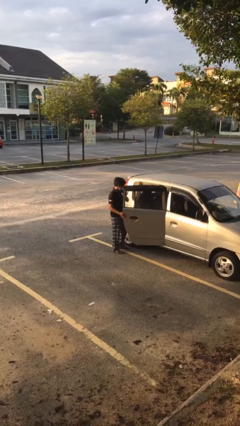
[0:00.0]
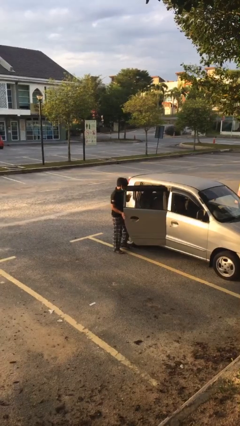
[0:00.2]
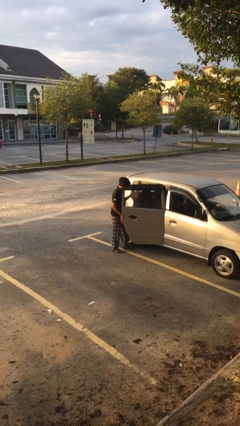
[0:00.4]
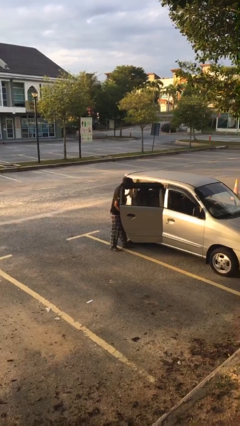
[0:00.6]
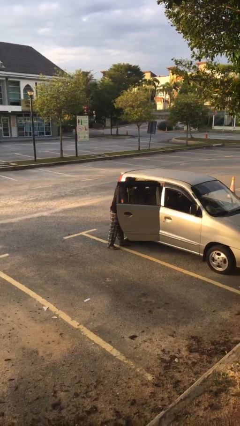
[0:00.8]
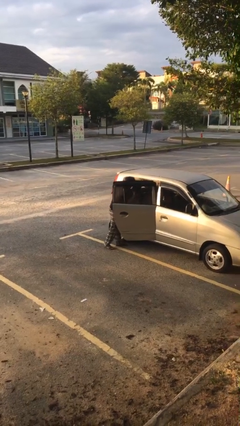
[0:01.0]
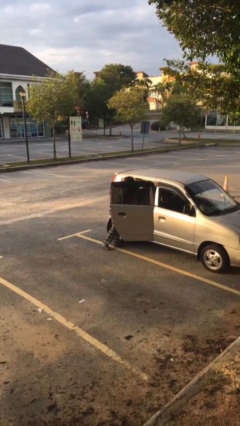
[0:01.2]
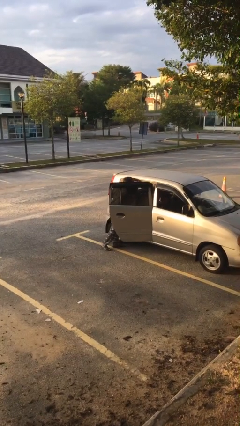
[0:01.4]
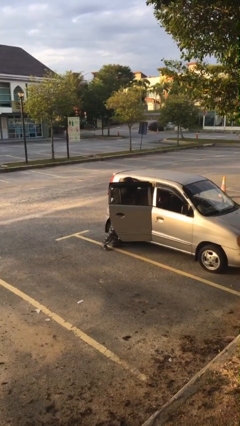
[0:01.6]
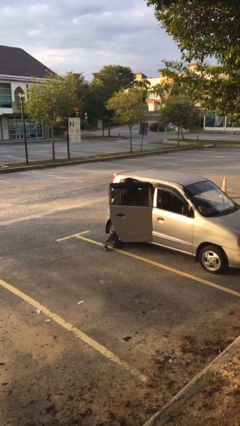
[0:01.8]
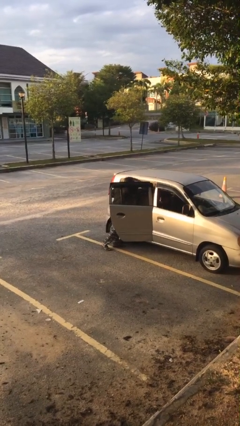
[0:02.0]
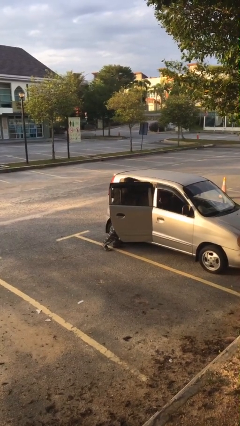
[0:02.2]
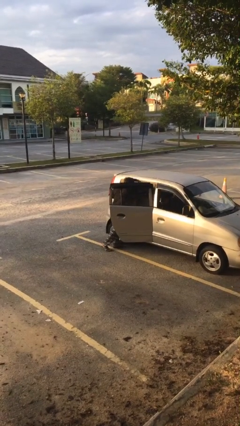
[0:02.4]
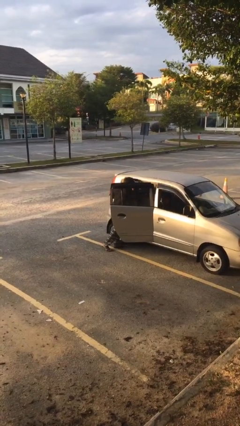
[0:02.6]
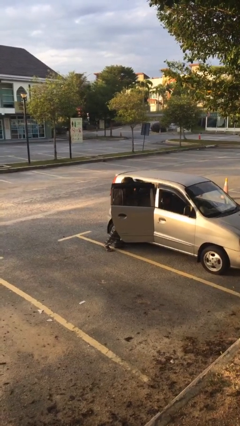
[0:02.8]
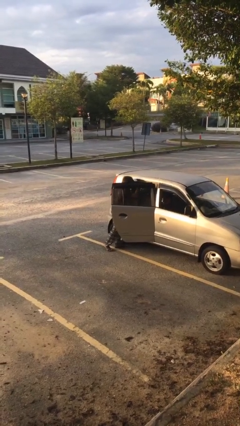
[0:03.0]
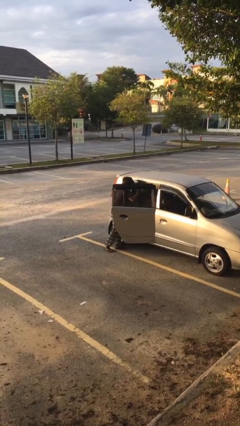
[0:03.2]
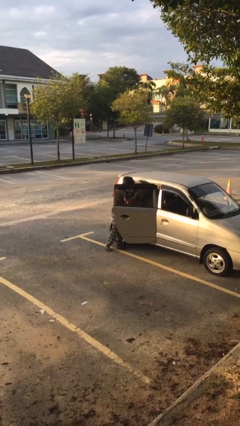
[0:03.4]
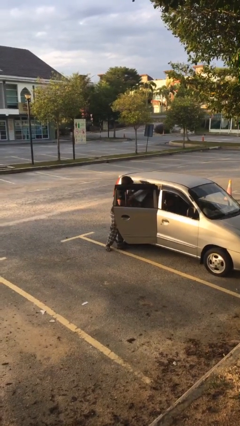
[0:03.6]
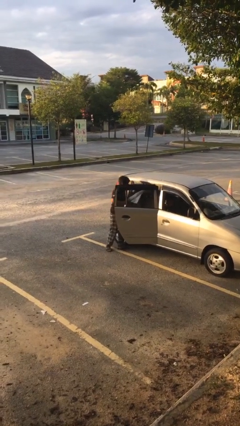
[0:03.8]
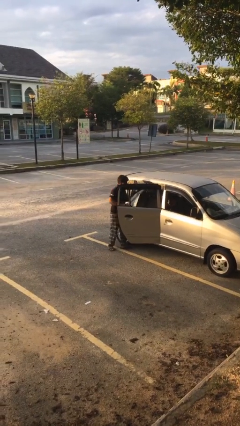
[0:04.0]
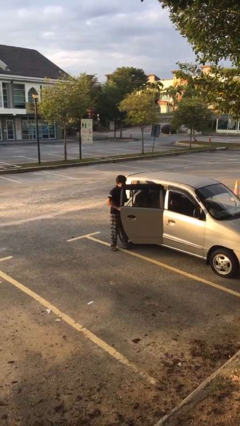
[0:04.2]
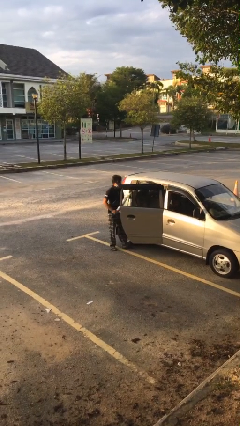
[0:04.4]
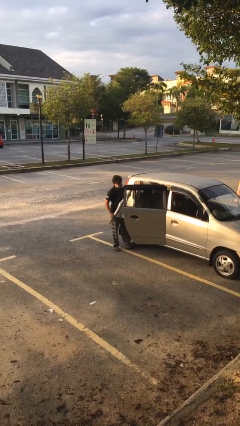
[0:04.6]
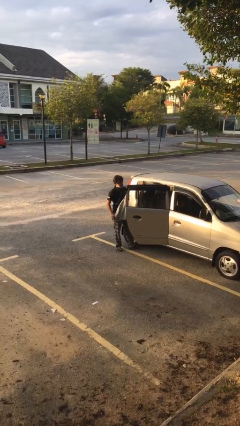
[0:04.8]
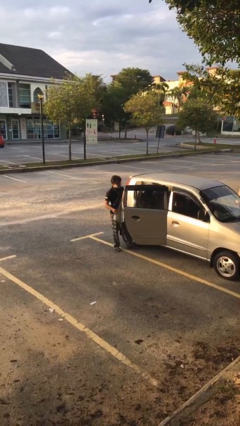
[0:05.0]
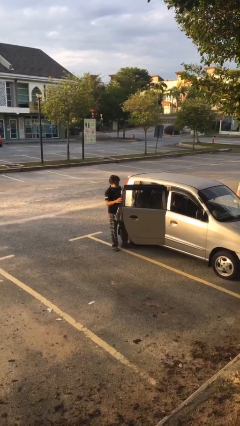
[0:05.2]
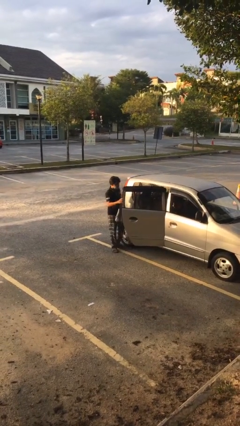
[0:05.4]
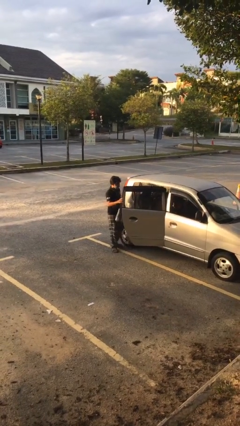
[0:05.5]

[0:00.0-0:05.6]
person unloads car

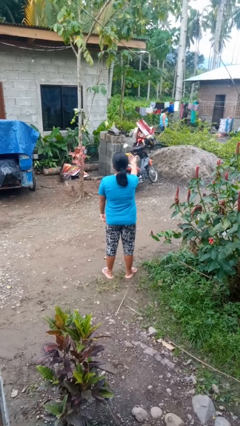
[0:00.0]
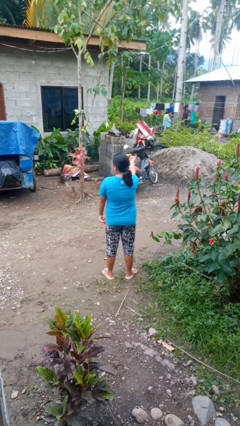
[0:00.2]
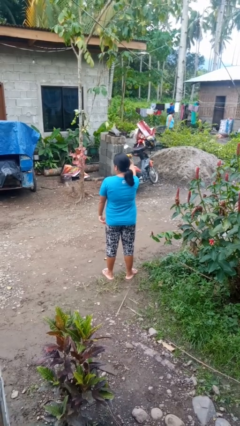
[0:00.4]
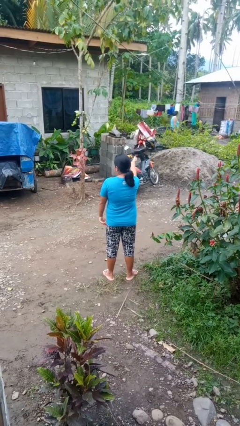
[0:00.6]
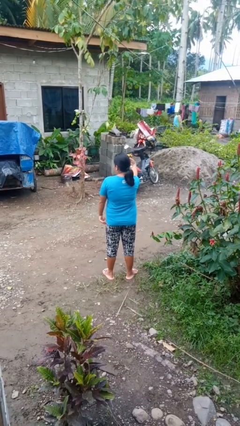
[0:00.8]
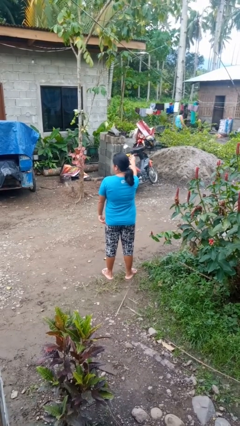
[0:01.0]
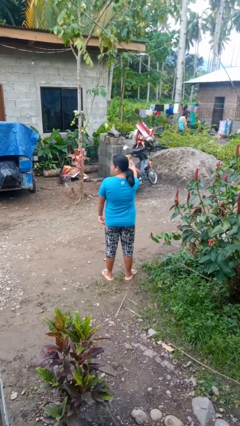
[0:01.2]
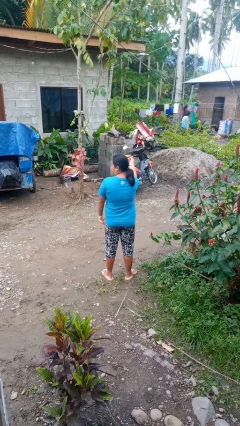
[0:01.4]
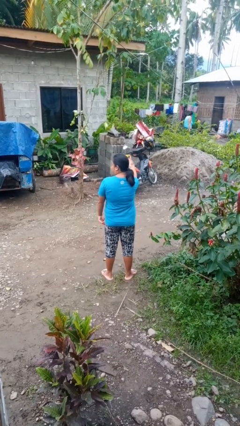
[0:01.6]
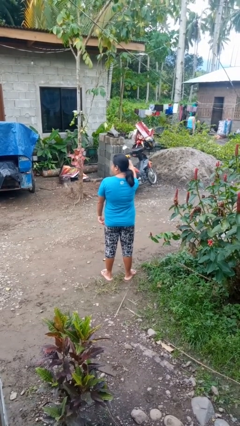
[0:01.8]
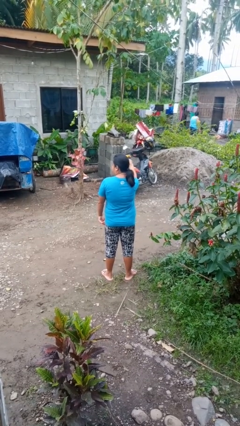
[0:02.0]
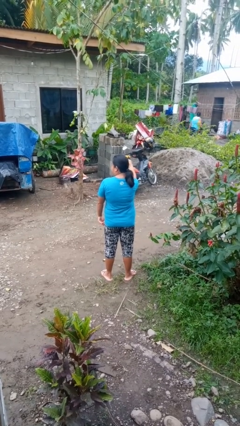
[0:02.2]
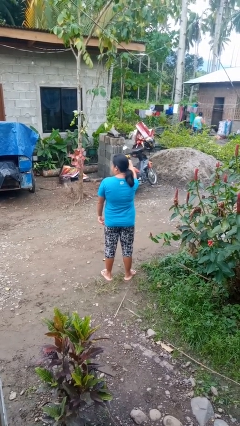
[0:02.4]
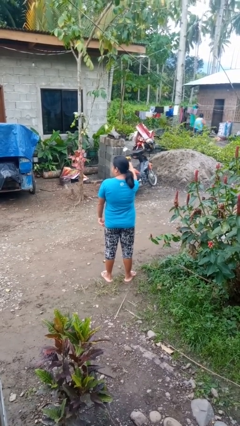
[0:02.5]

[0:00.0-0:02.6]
person gestures come here

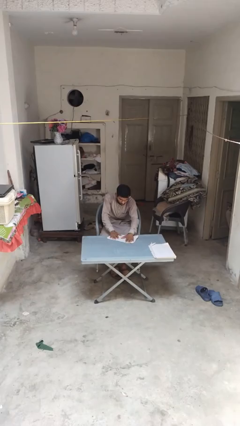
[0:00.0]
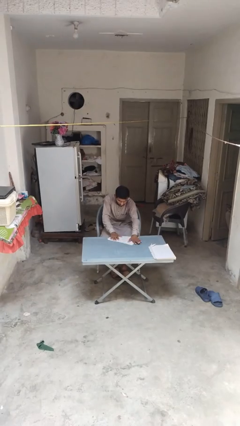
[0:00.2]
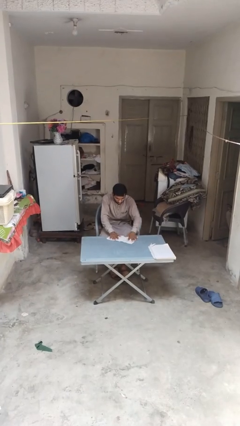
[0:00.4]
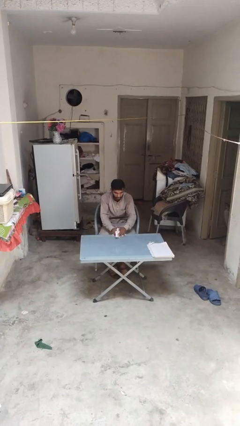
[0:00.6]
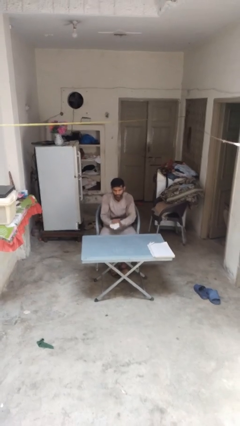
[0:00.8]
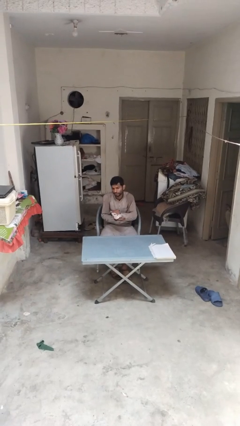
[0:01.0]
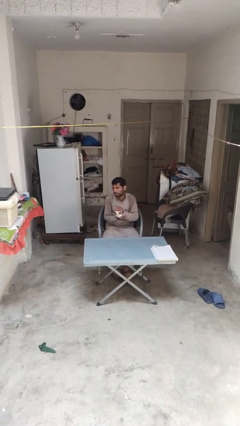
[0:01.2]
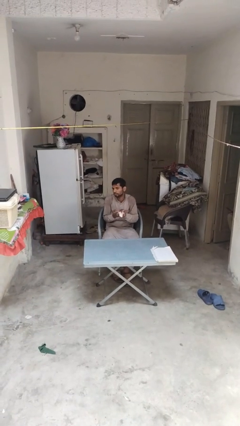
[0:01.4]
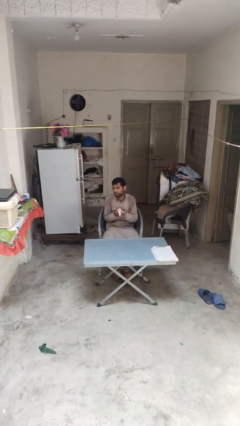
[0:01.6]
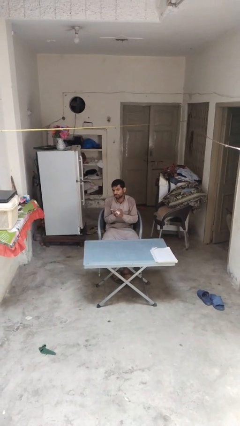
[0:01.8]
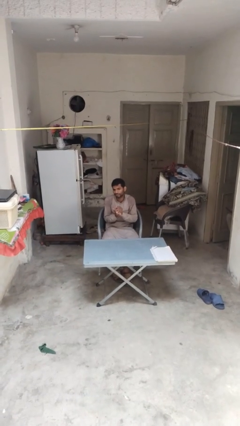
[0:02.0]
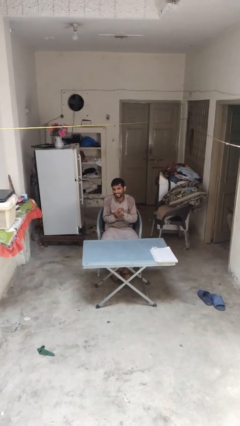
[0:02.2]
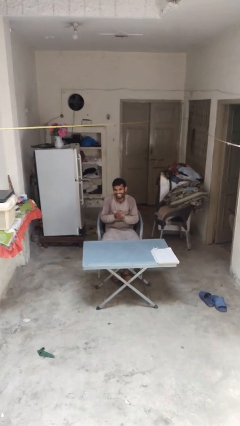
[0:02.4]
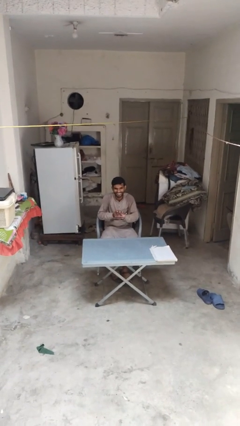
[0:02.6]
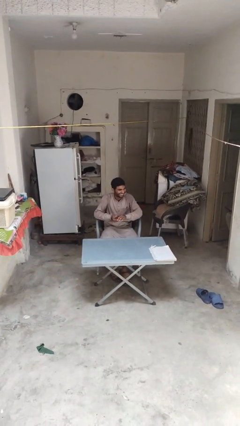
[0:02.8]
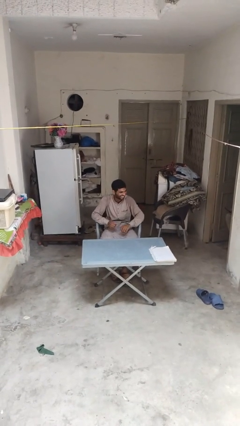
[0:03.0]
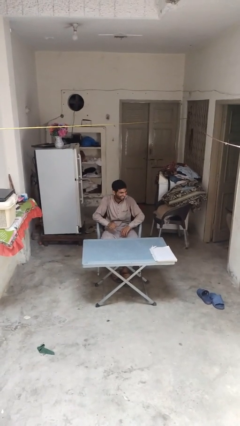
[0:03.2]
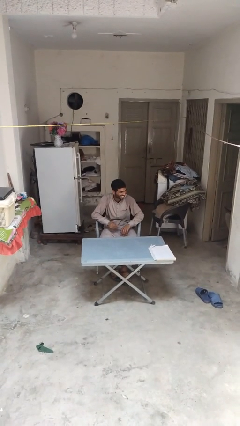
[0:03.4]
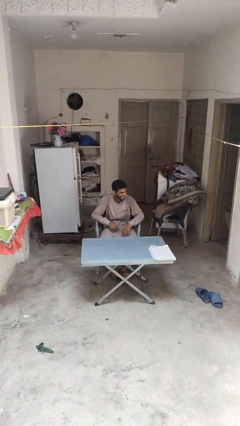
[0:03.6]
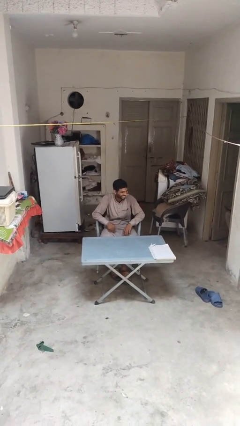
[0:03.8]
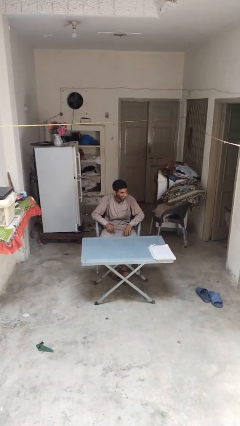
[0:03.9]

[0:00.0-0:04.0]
person crumples paper

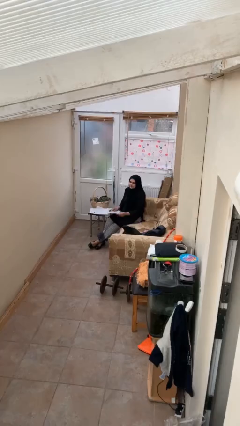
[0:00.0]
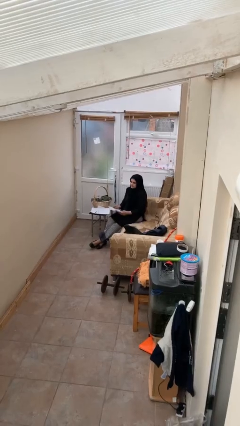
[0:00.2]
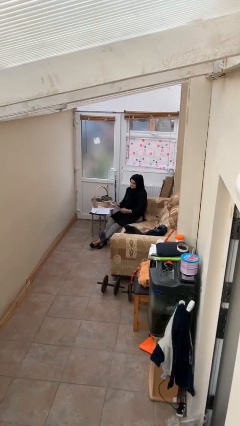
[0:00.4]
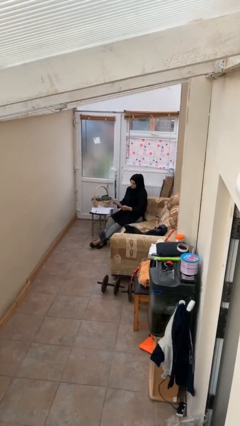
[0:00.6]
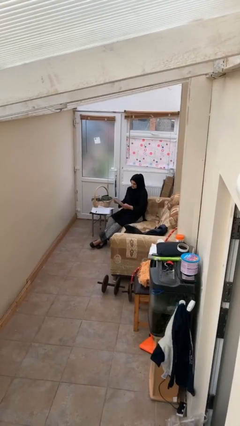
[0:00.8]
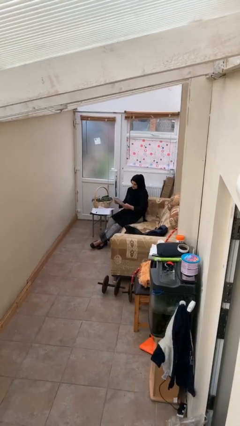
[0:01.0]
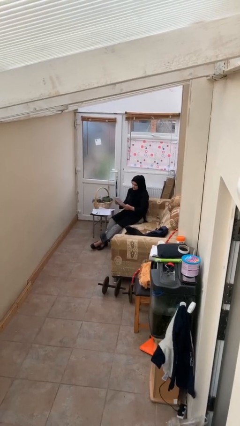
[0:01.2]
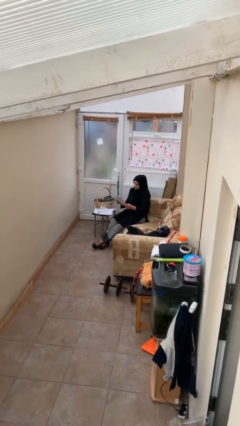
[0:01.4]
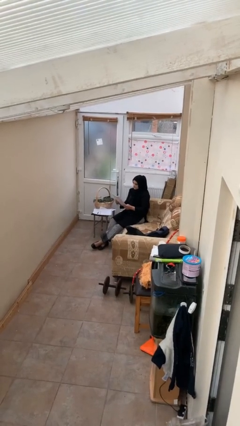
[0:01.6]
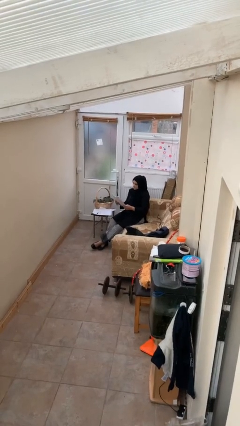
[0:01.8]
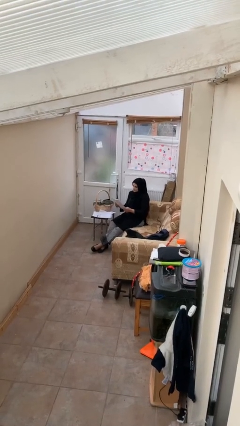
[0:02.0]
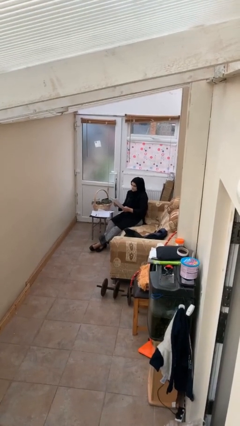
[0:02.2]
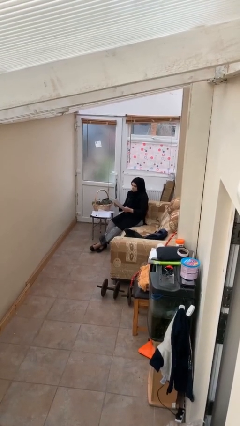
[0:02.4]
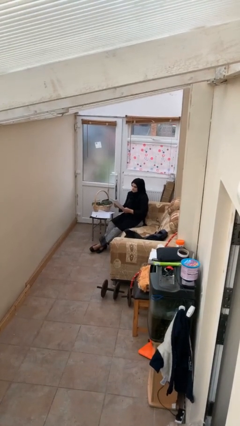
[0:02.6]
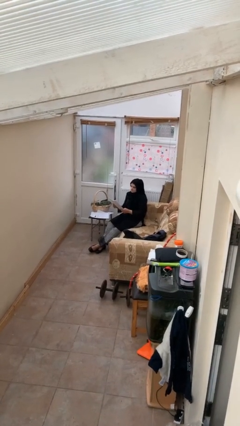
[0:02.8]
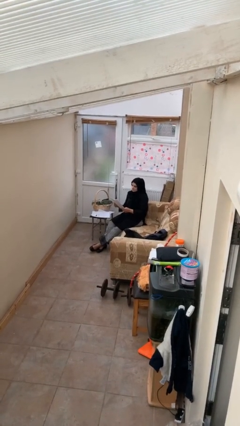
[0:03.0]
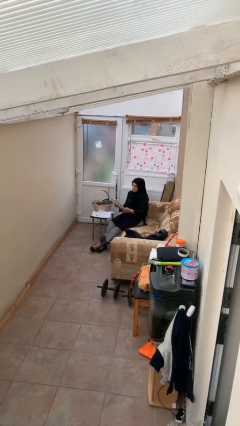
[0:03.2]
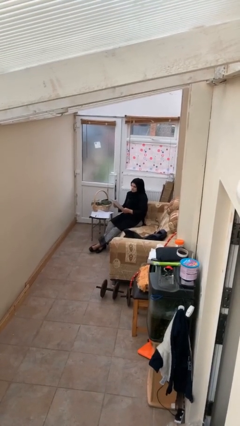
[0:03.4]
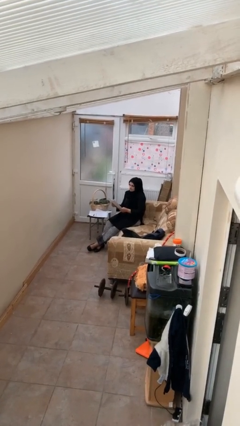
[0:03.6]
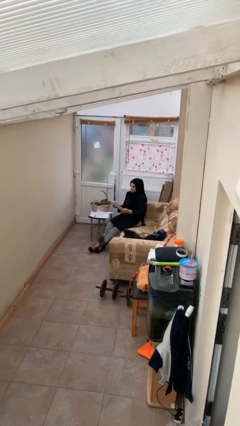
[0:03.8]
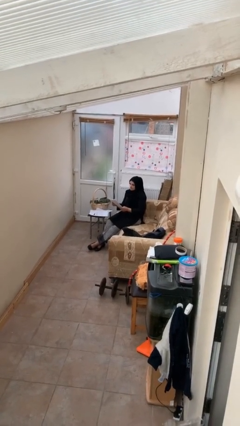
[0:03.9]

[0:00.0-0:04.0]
person reads document

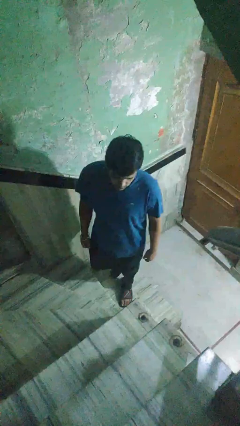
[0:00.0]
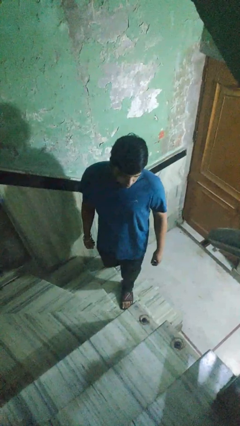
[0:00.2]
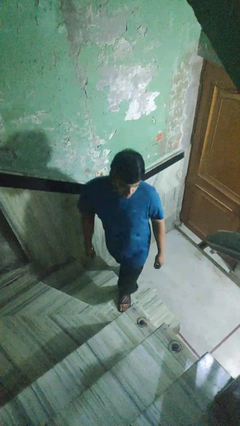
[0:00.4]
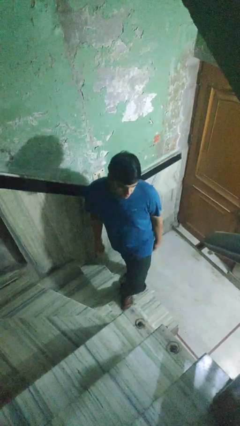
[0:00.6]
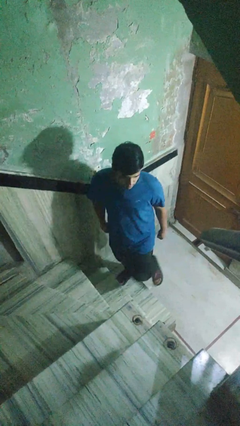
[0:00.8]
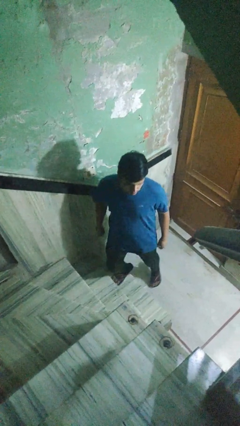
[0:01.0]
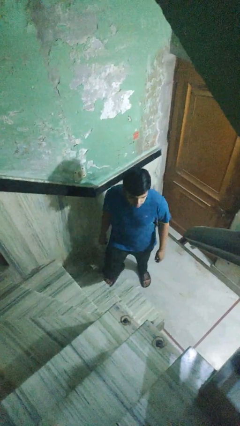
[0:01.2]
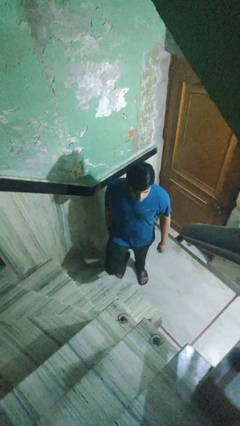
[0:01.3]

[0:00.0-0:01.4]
person climbs down stairs
